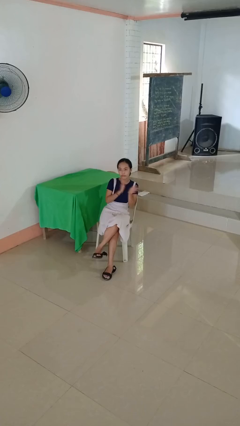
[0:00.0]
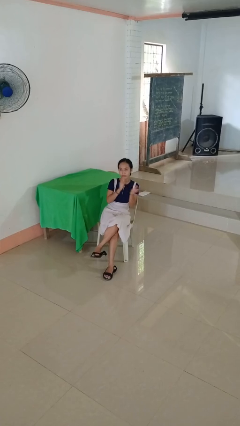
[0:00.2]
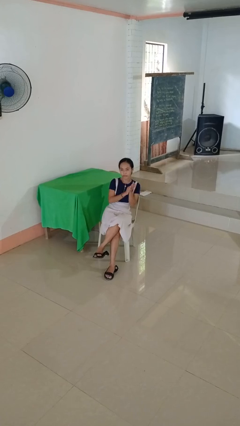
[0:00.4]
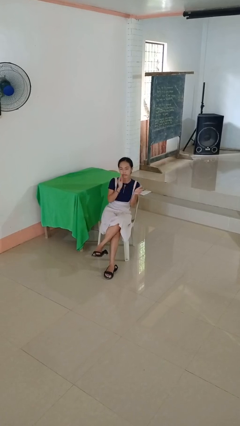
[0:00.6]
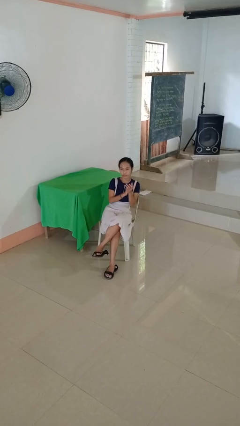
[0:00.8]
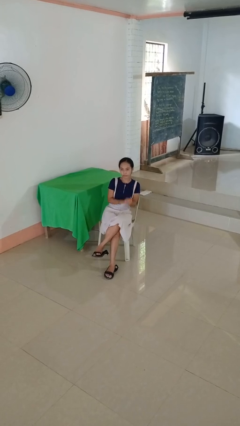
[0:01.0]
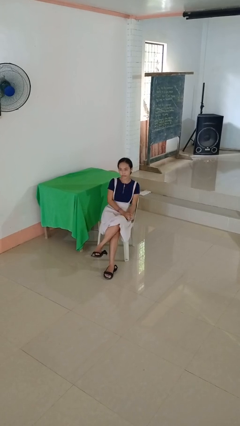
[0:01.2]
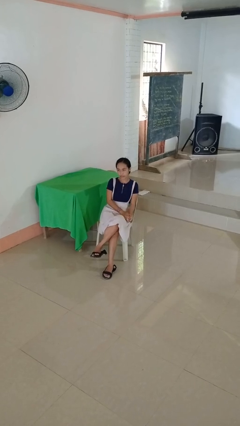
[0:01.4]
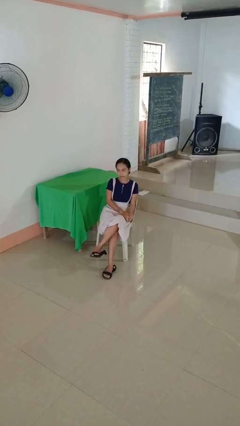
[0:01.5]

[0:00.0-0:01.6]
person claps hands

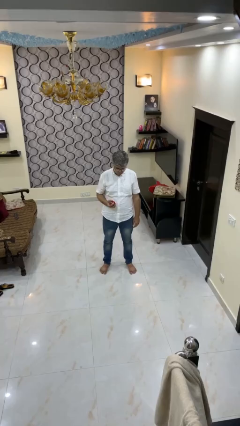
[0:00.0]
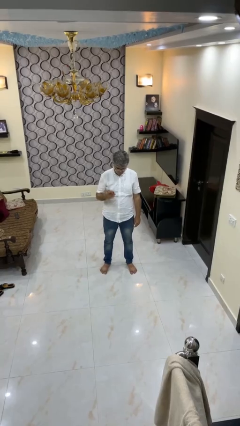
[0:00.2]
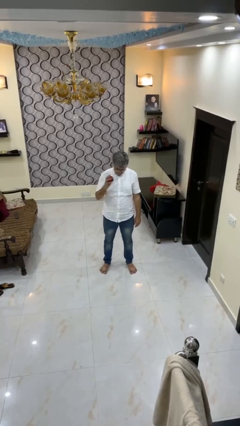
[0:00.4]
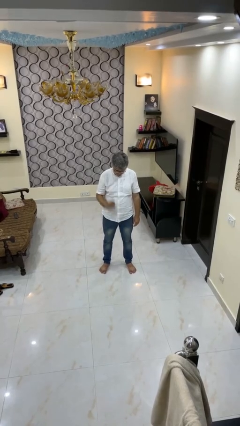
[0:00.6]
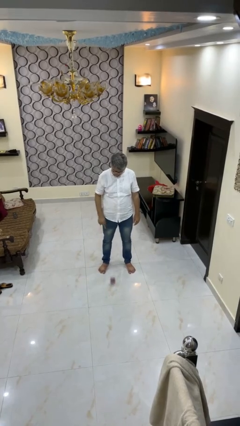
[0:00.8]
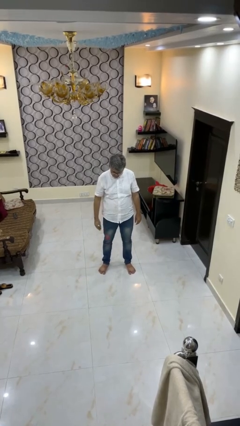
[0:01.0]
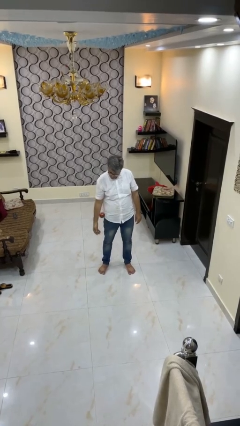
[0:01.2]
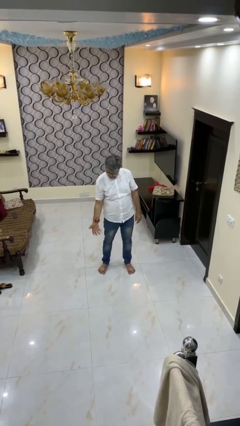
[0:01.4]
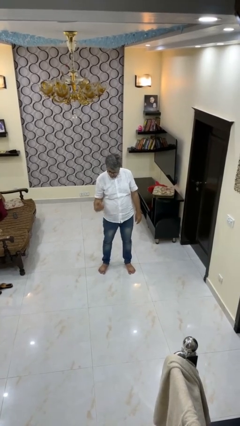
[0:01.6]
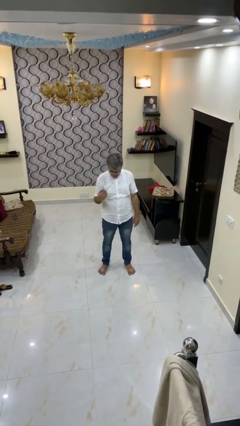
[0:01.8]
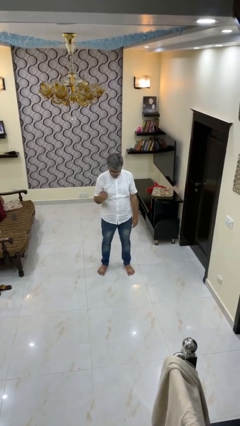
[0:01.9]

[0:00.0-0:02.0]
person bounces ball on floor

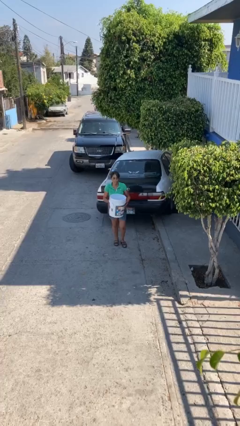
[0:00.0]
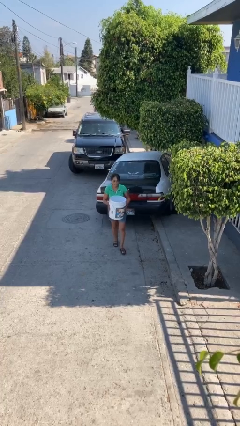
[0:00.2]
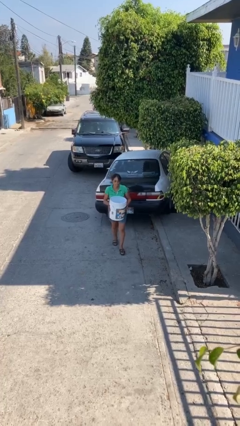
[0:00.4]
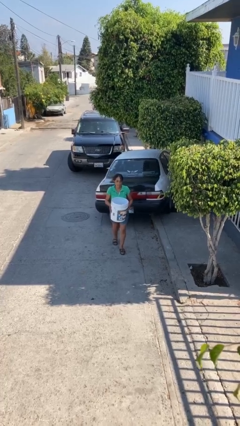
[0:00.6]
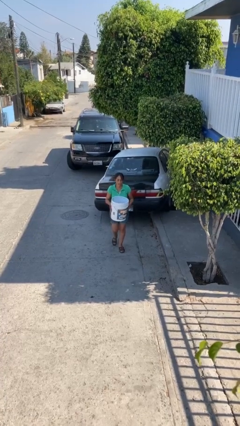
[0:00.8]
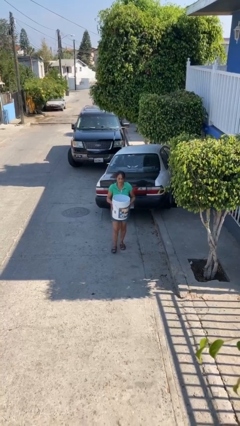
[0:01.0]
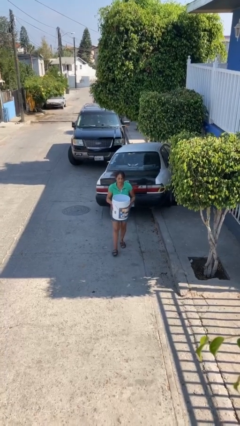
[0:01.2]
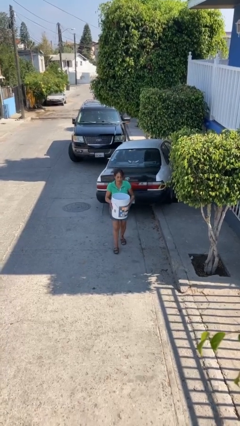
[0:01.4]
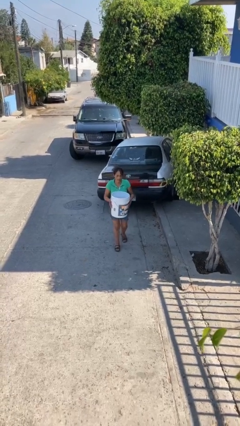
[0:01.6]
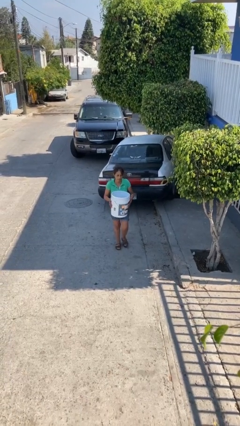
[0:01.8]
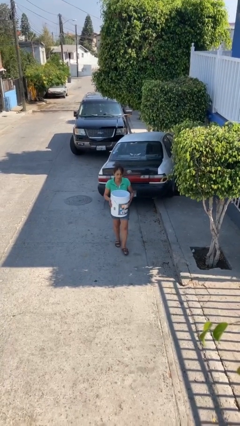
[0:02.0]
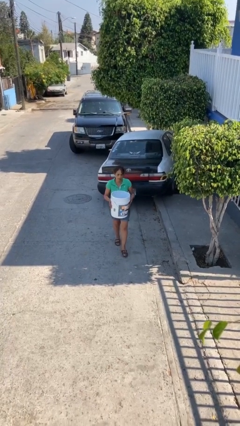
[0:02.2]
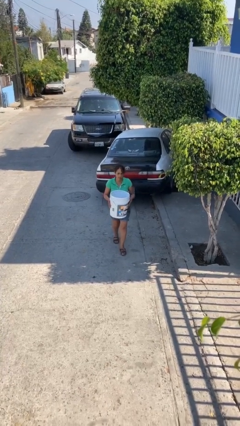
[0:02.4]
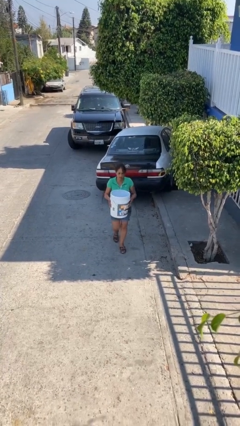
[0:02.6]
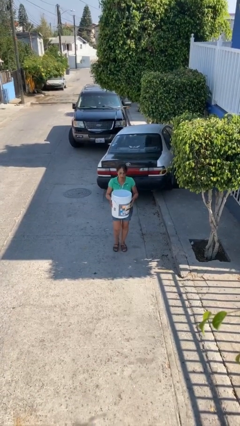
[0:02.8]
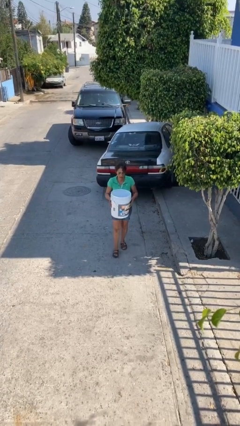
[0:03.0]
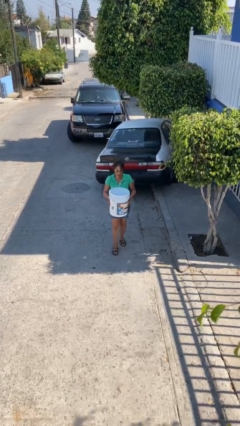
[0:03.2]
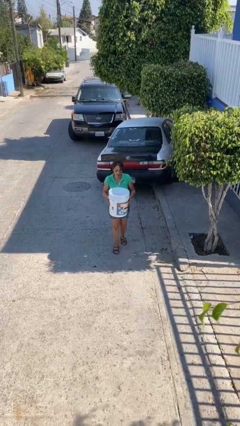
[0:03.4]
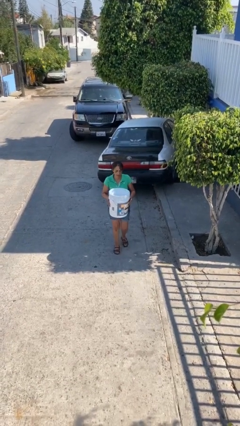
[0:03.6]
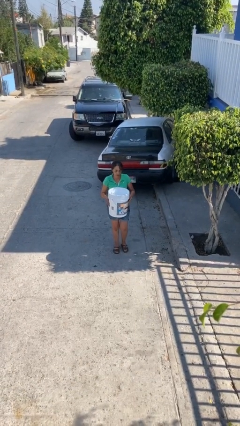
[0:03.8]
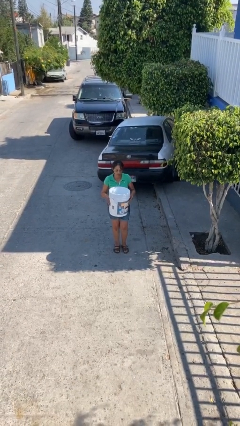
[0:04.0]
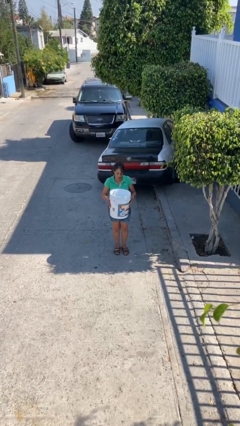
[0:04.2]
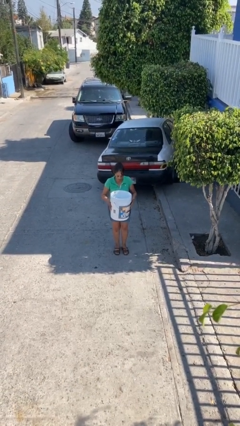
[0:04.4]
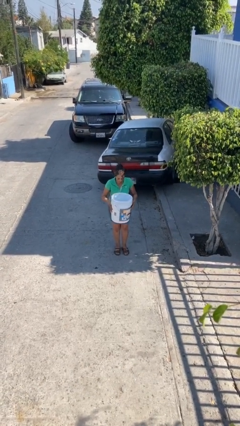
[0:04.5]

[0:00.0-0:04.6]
person carries heavy object

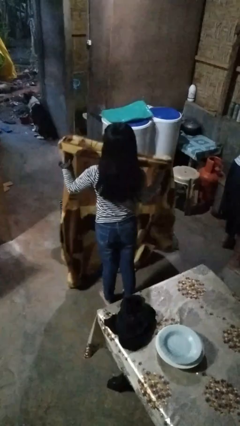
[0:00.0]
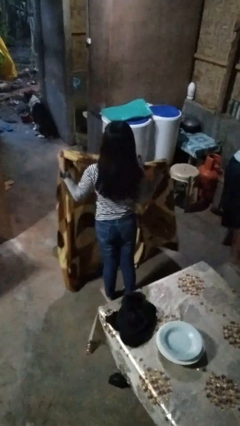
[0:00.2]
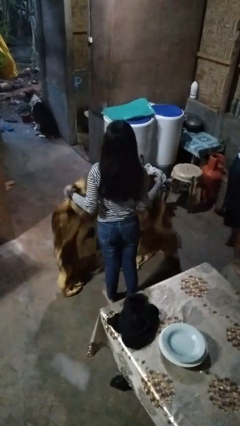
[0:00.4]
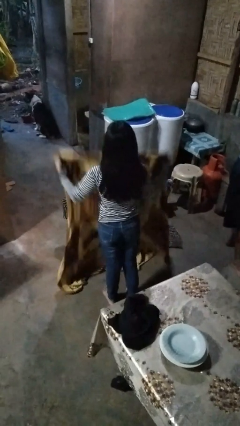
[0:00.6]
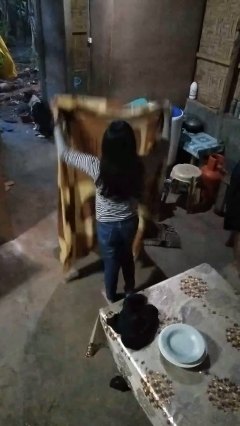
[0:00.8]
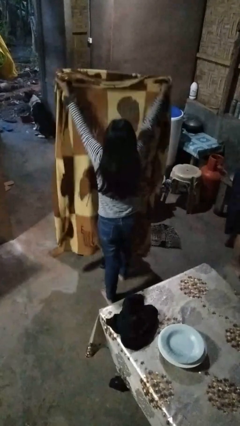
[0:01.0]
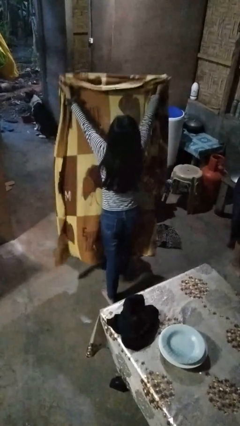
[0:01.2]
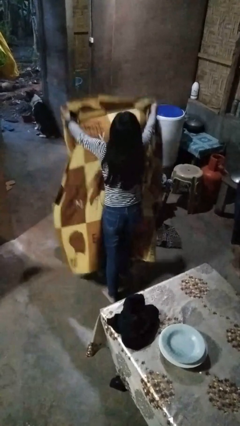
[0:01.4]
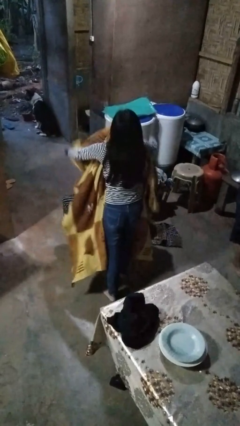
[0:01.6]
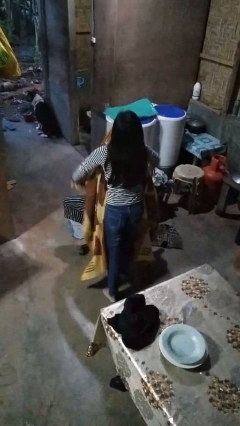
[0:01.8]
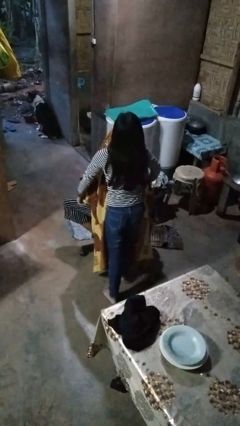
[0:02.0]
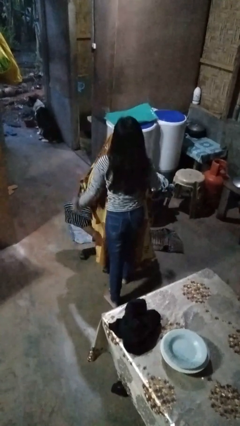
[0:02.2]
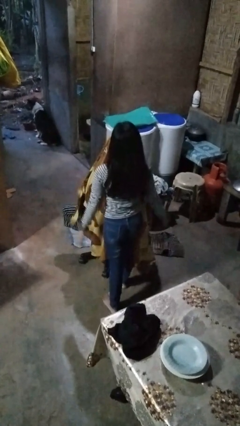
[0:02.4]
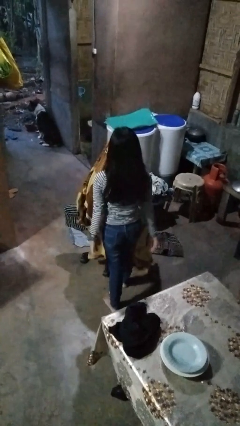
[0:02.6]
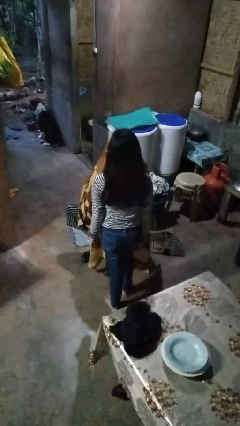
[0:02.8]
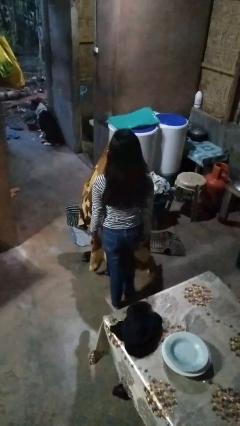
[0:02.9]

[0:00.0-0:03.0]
person covers friend with blanket

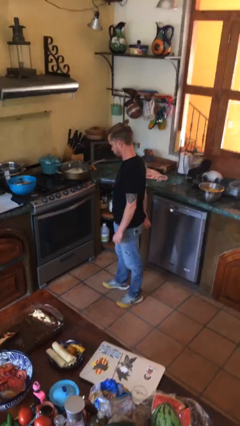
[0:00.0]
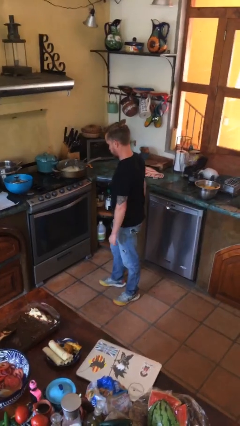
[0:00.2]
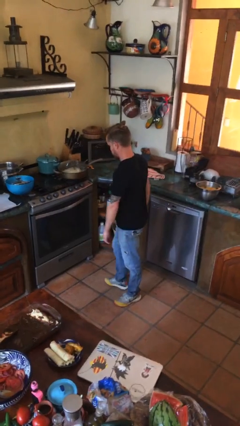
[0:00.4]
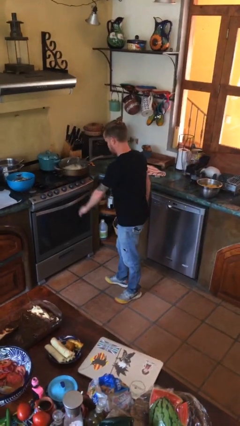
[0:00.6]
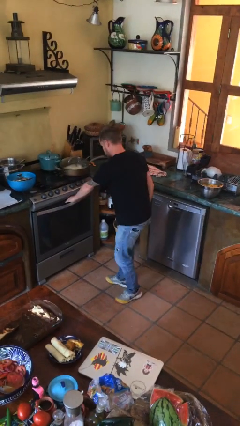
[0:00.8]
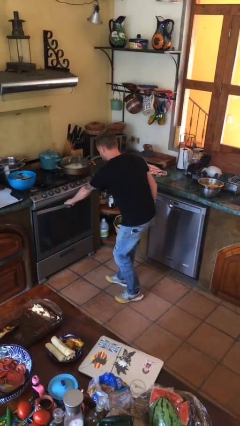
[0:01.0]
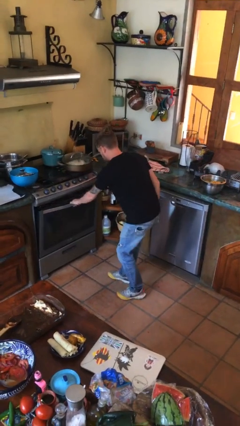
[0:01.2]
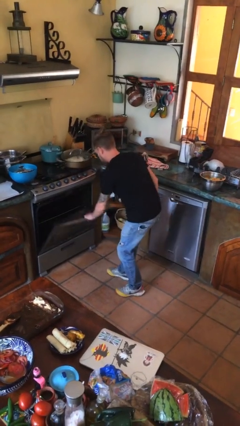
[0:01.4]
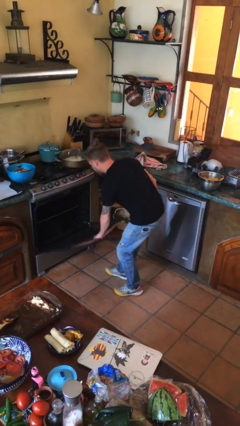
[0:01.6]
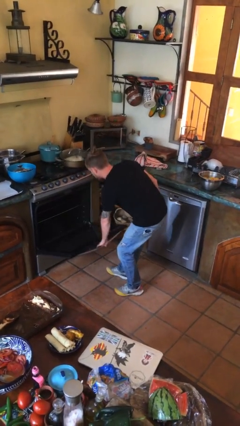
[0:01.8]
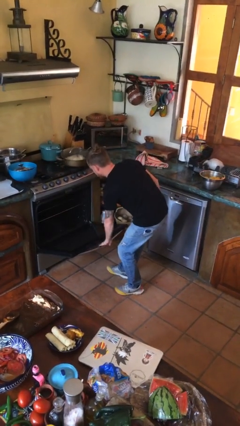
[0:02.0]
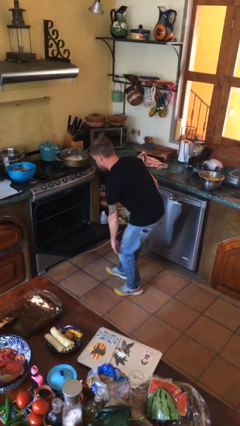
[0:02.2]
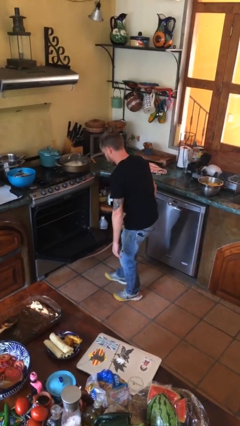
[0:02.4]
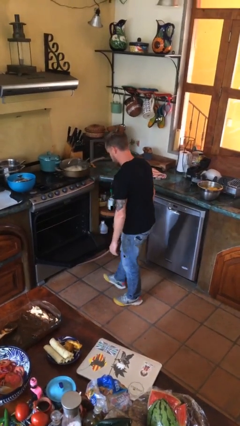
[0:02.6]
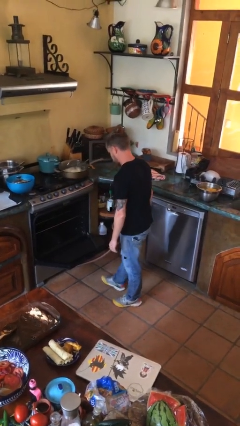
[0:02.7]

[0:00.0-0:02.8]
person opens oven door

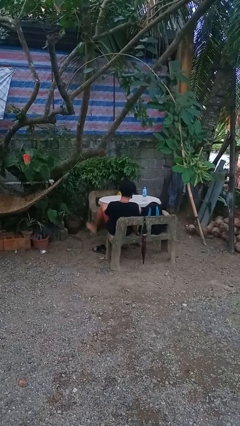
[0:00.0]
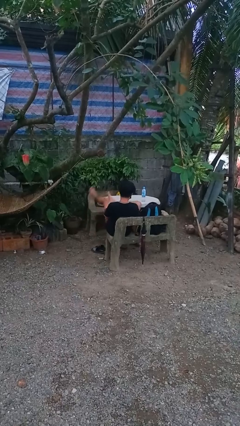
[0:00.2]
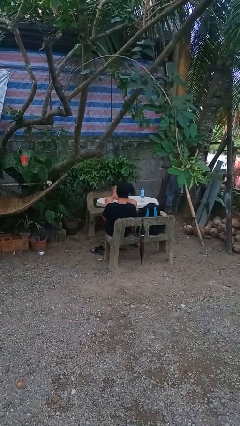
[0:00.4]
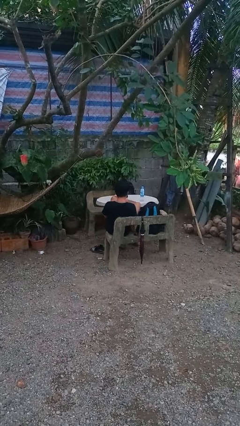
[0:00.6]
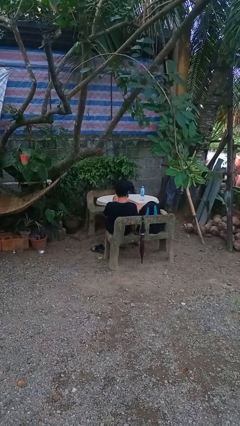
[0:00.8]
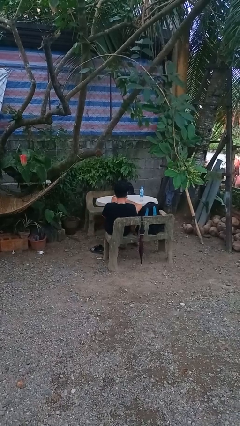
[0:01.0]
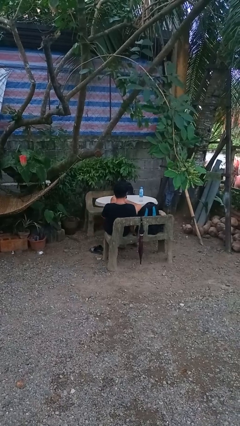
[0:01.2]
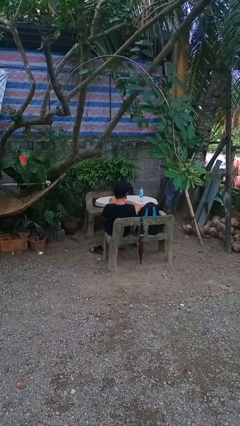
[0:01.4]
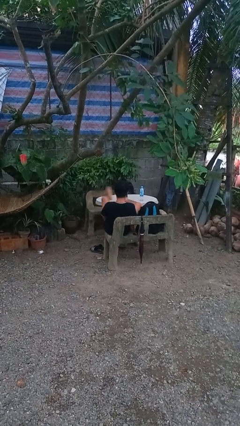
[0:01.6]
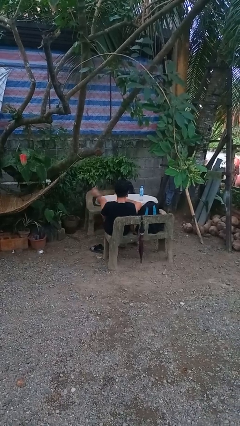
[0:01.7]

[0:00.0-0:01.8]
person puts feet up

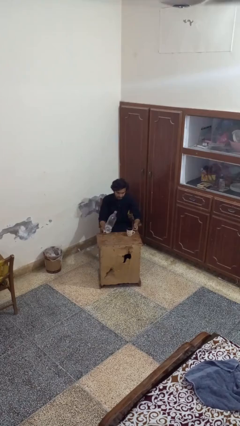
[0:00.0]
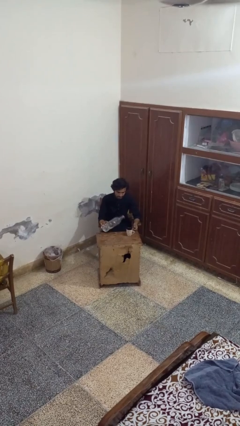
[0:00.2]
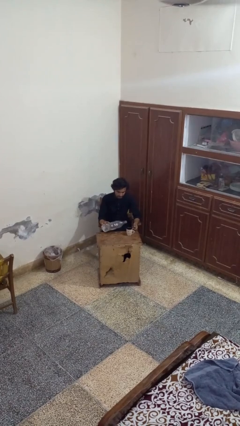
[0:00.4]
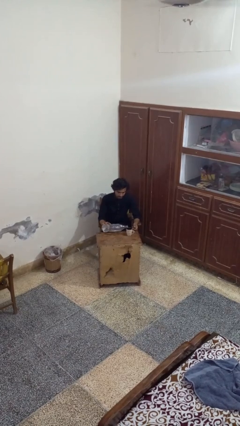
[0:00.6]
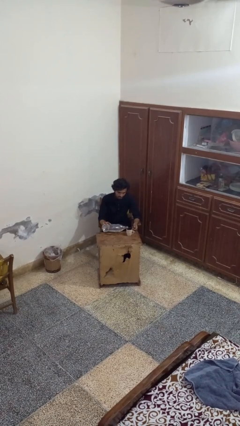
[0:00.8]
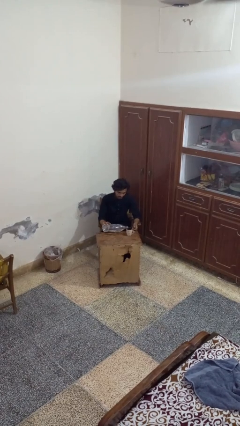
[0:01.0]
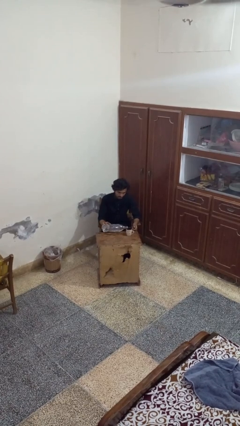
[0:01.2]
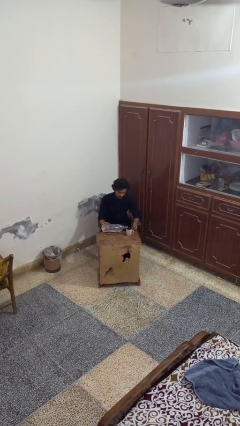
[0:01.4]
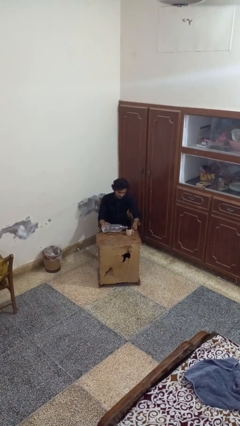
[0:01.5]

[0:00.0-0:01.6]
person pours liquid into cup
